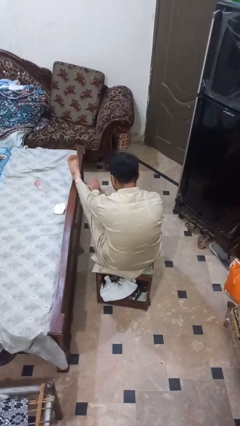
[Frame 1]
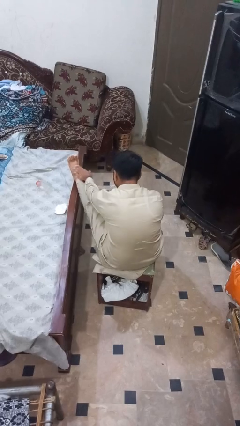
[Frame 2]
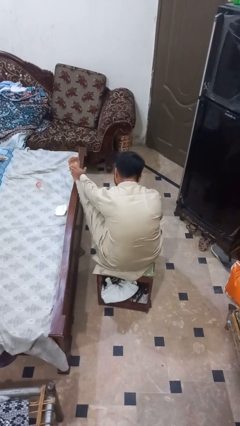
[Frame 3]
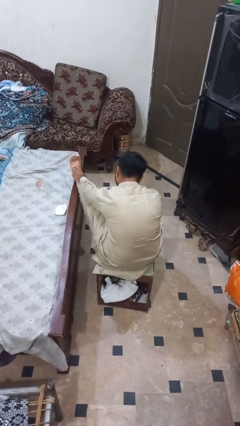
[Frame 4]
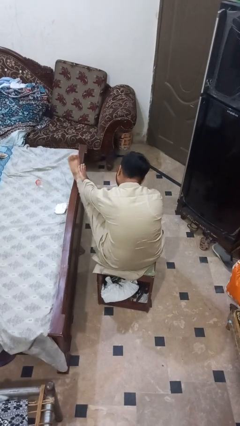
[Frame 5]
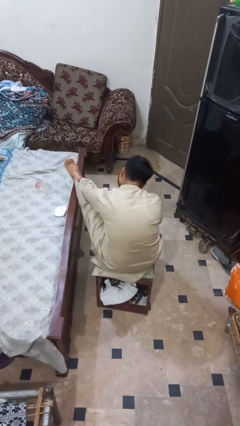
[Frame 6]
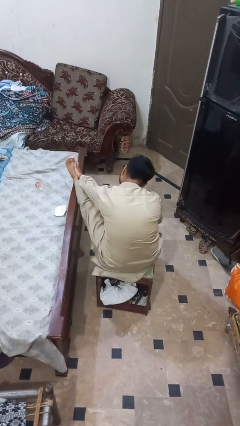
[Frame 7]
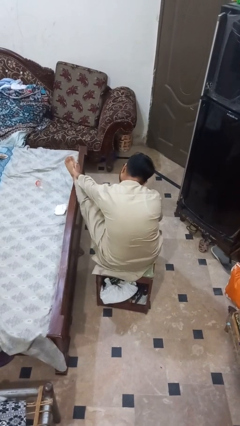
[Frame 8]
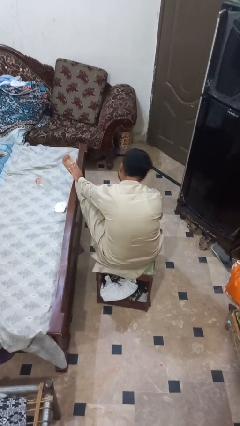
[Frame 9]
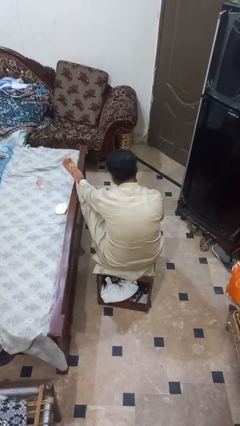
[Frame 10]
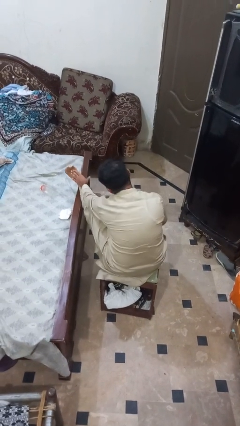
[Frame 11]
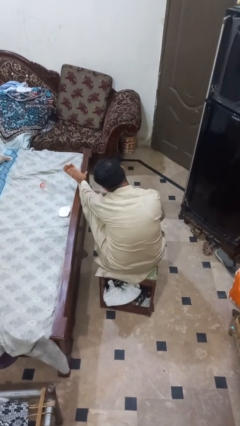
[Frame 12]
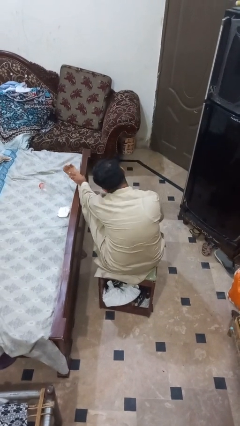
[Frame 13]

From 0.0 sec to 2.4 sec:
person rubs foot

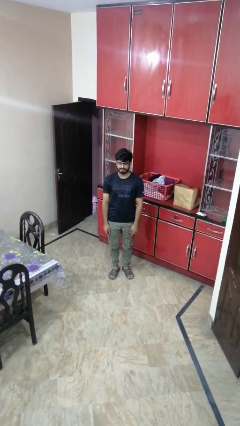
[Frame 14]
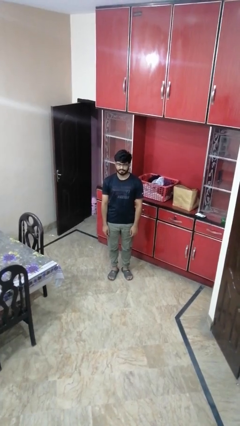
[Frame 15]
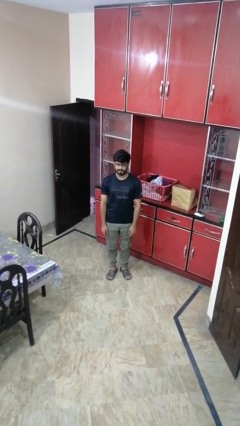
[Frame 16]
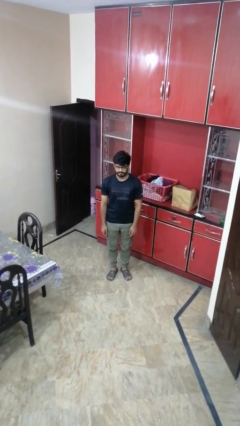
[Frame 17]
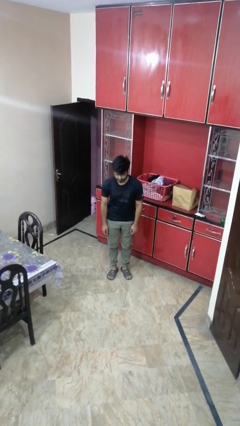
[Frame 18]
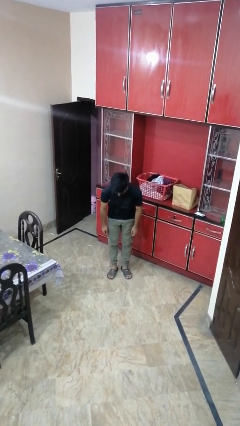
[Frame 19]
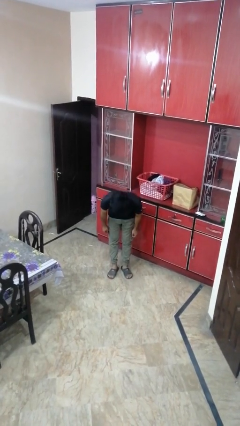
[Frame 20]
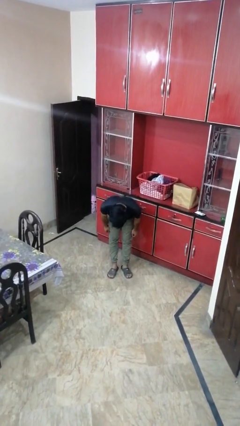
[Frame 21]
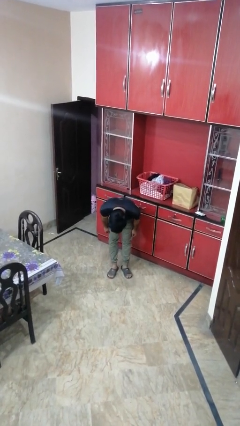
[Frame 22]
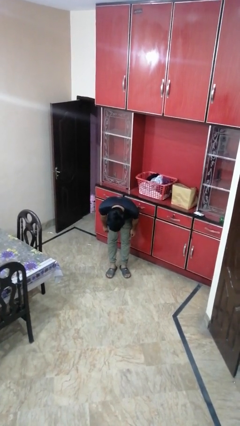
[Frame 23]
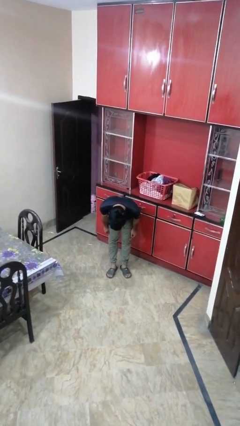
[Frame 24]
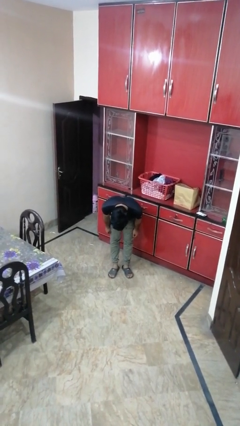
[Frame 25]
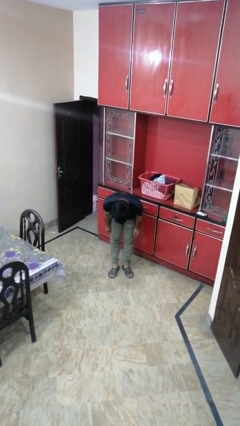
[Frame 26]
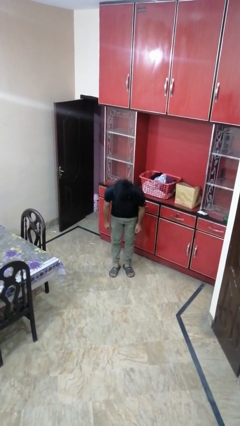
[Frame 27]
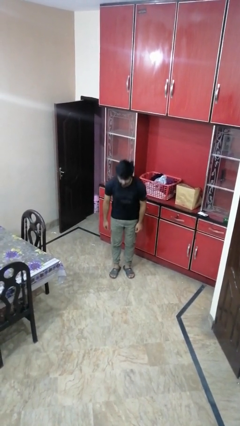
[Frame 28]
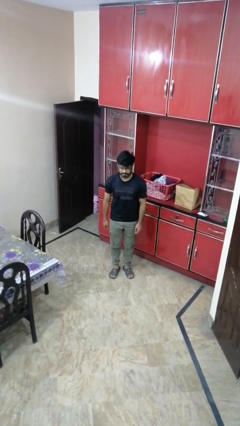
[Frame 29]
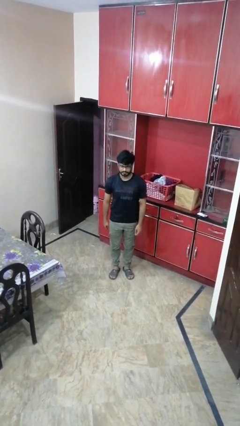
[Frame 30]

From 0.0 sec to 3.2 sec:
person bows

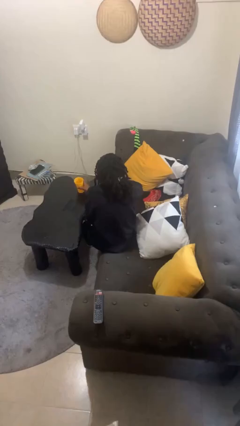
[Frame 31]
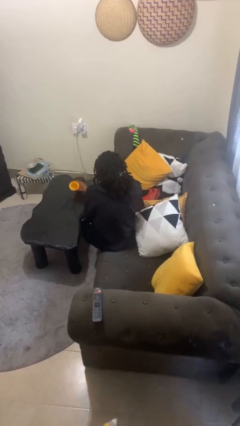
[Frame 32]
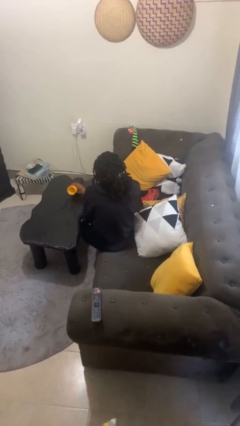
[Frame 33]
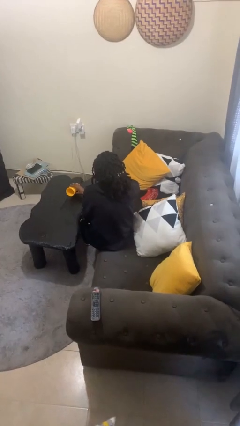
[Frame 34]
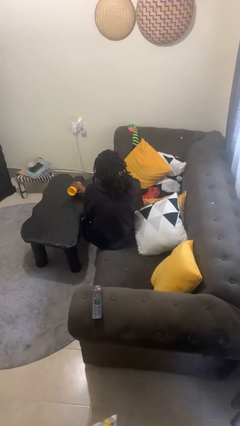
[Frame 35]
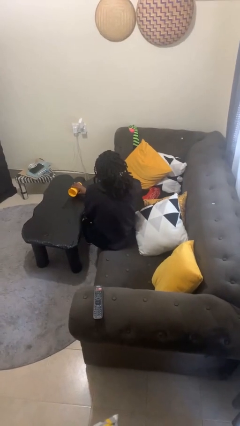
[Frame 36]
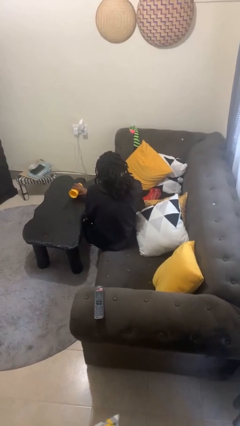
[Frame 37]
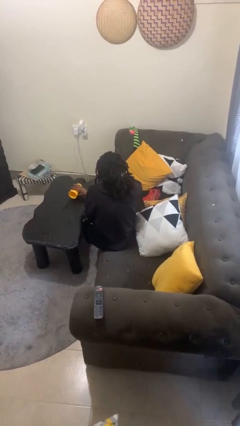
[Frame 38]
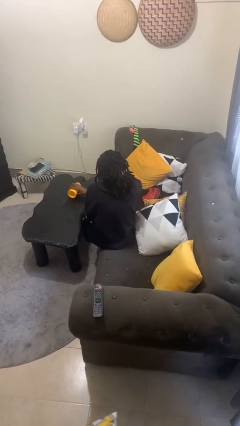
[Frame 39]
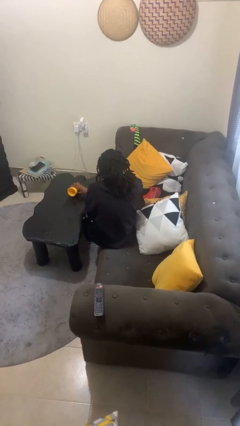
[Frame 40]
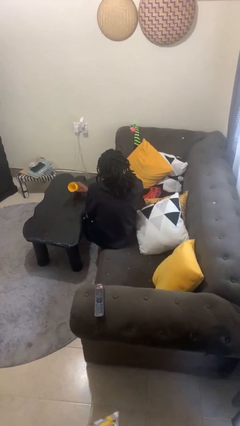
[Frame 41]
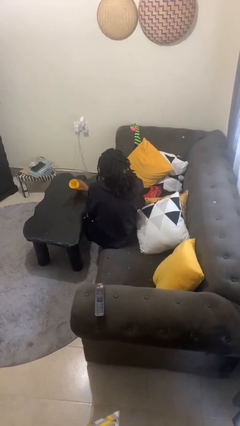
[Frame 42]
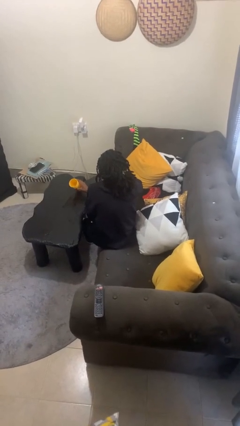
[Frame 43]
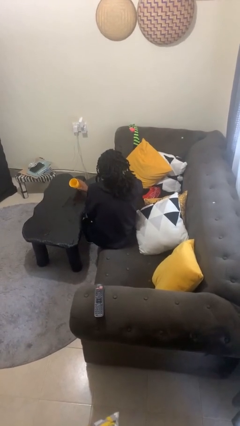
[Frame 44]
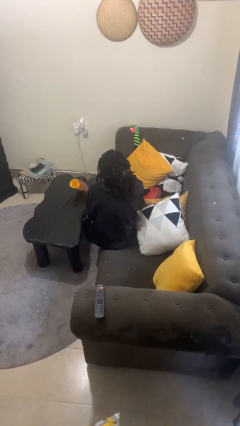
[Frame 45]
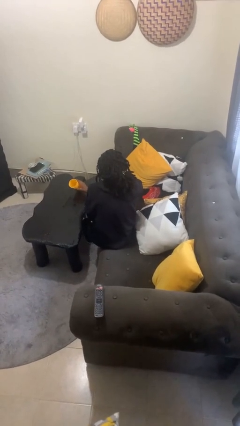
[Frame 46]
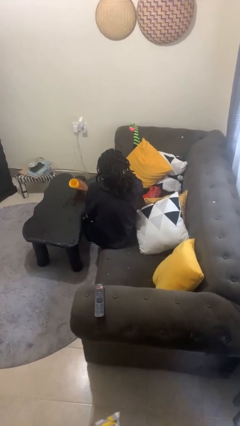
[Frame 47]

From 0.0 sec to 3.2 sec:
person spills on table

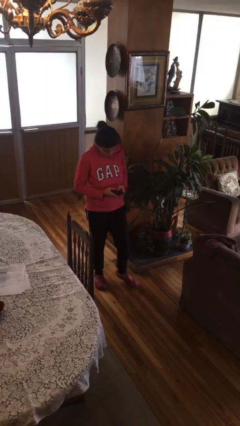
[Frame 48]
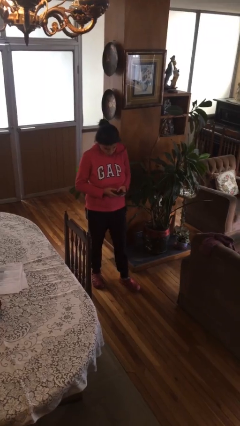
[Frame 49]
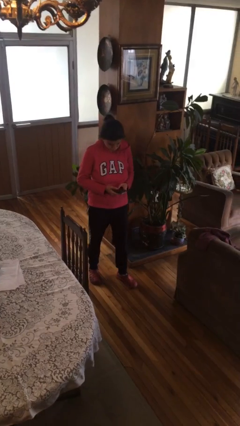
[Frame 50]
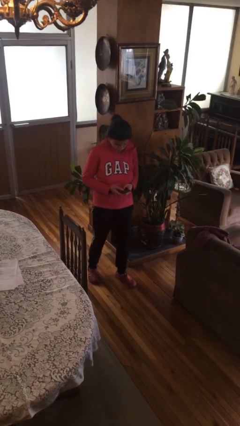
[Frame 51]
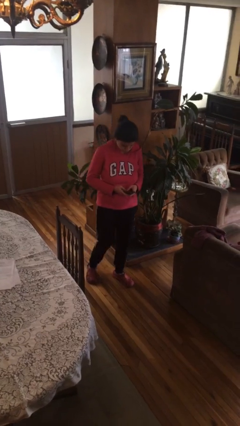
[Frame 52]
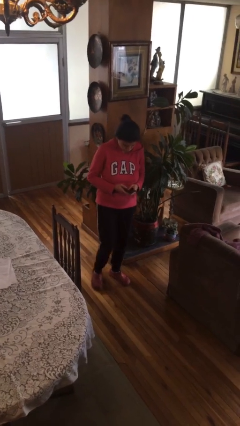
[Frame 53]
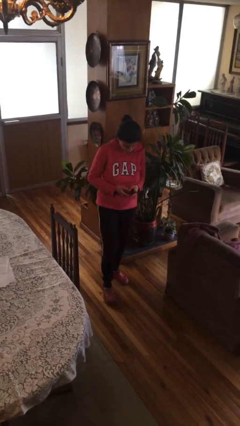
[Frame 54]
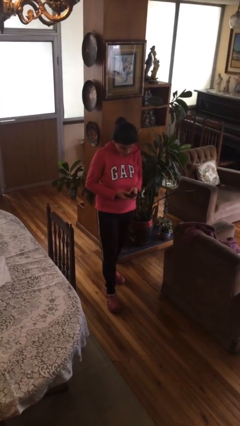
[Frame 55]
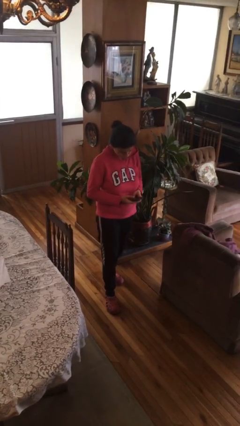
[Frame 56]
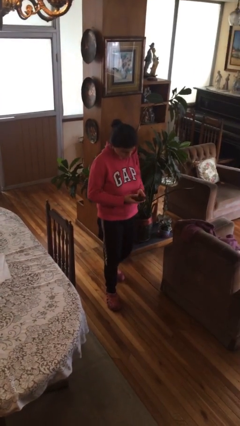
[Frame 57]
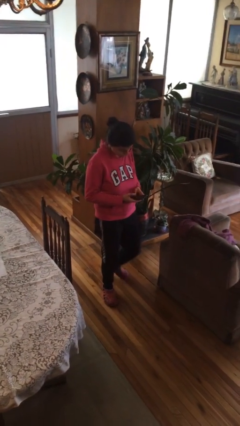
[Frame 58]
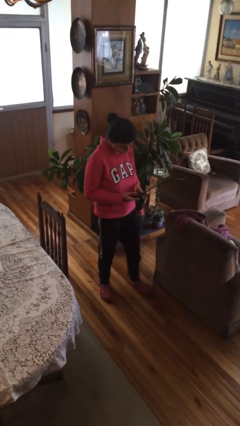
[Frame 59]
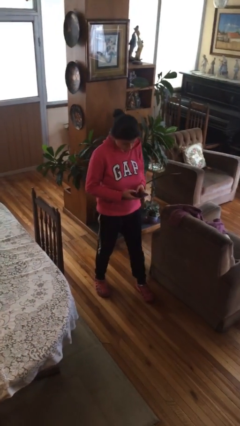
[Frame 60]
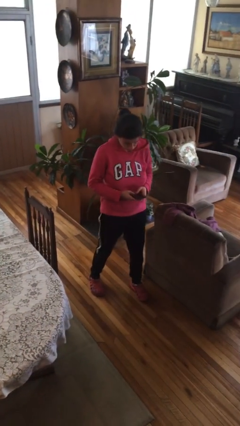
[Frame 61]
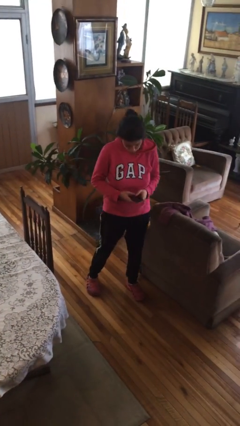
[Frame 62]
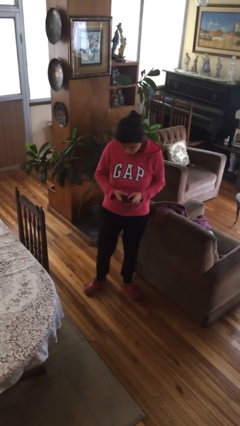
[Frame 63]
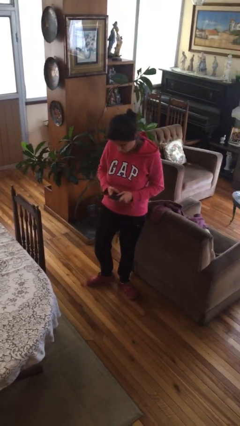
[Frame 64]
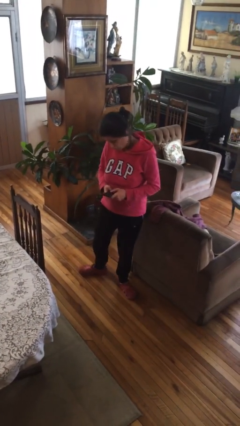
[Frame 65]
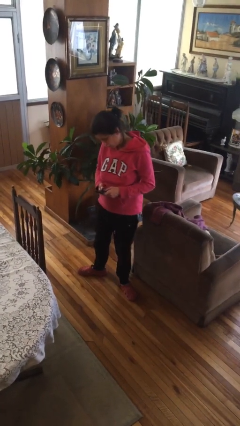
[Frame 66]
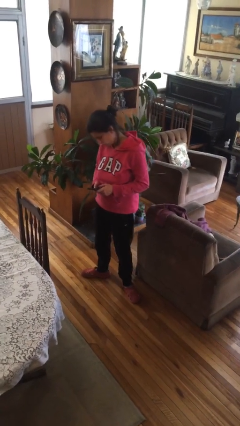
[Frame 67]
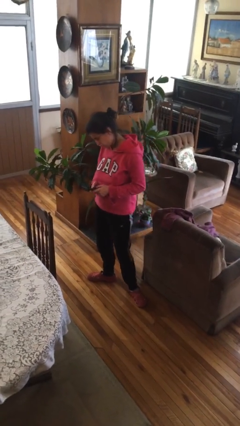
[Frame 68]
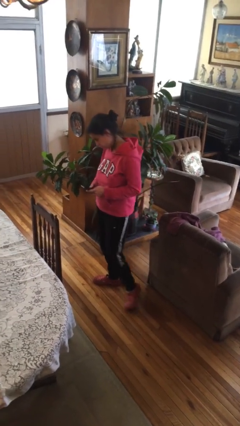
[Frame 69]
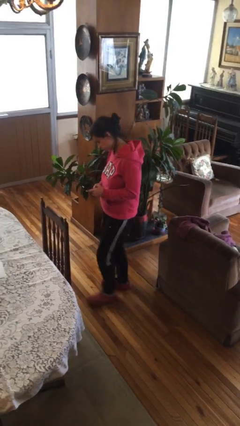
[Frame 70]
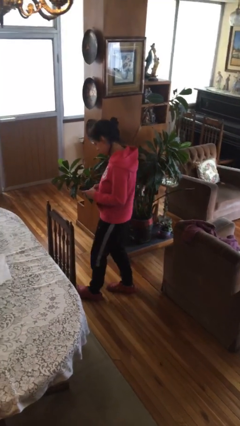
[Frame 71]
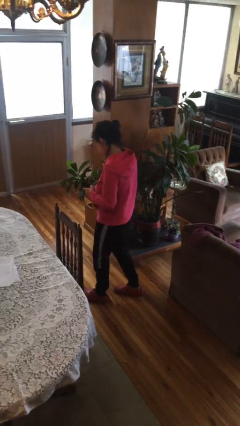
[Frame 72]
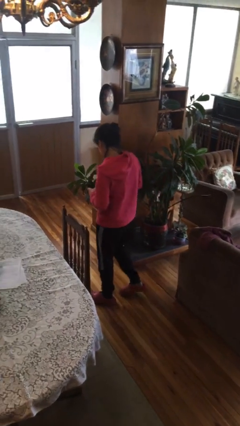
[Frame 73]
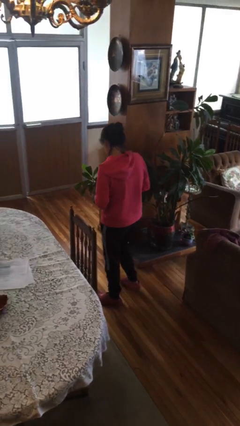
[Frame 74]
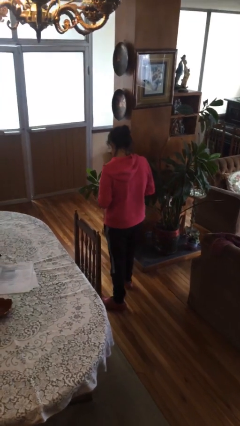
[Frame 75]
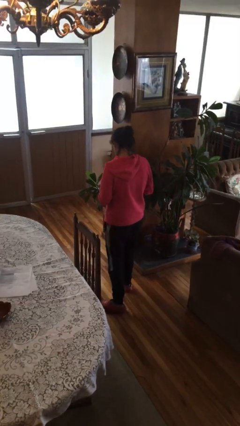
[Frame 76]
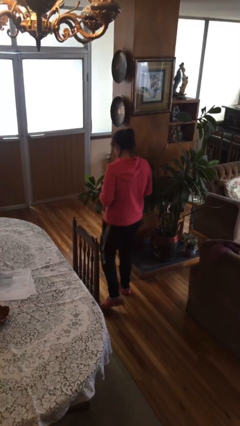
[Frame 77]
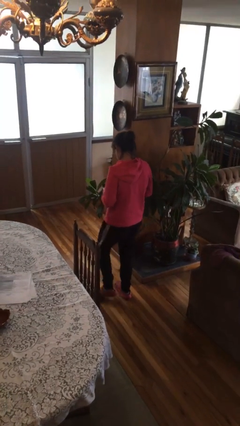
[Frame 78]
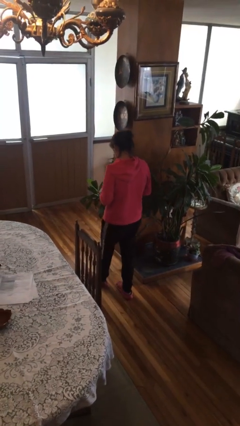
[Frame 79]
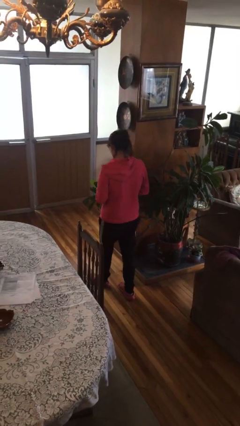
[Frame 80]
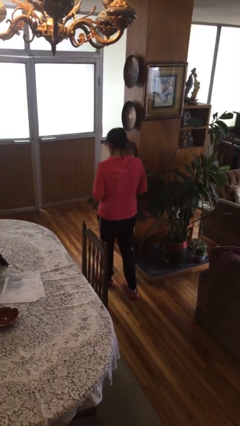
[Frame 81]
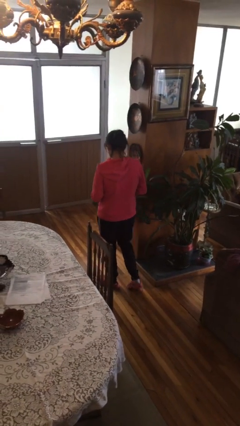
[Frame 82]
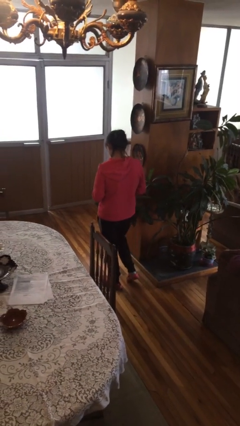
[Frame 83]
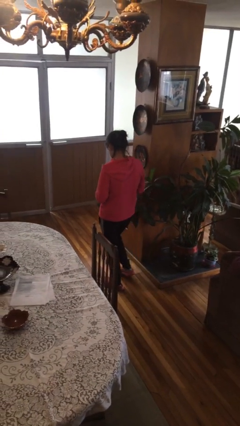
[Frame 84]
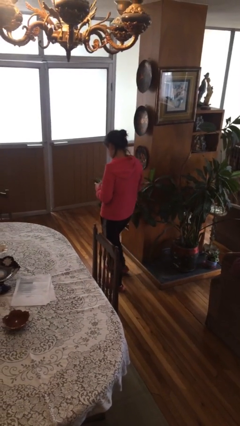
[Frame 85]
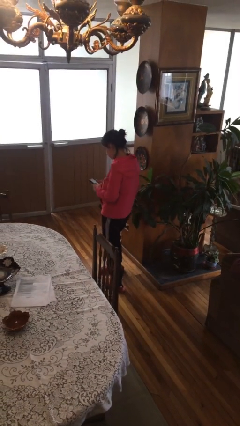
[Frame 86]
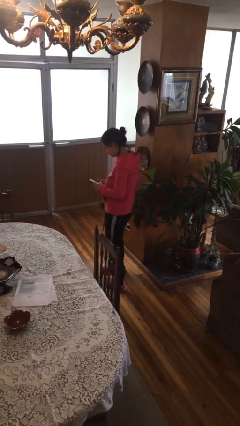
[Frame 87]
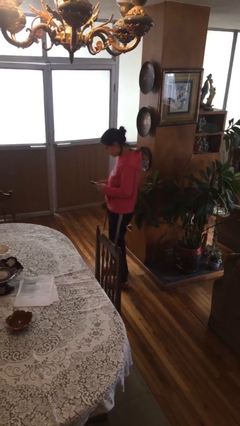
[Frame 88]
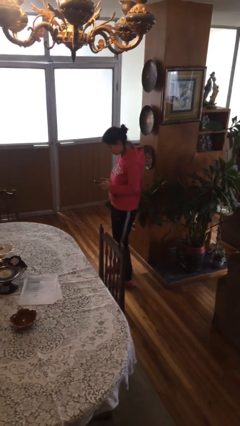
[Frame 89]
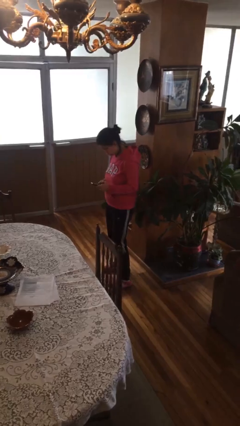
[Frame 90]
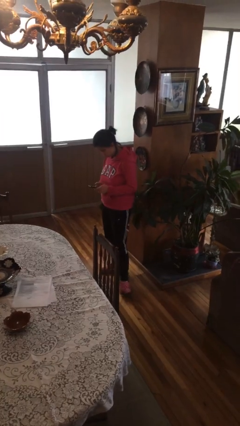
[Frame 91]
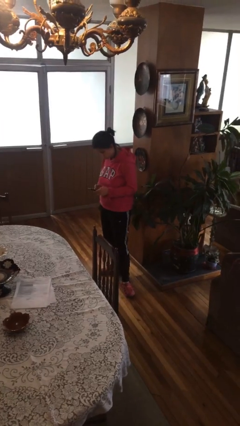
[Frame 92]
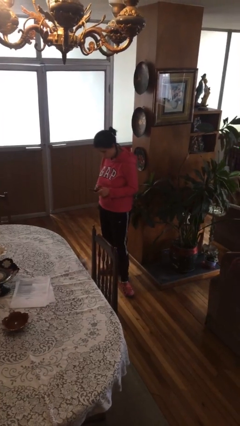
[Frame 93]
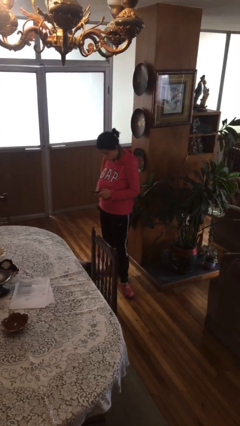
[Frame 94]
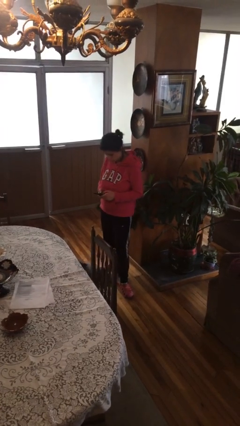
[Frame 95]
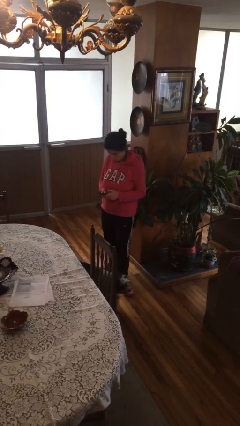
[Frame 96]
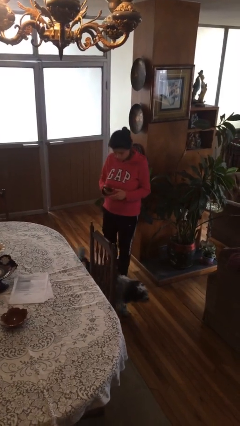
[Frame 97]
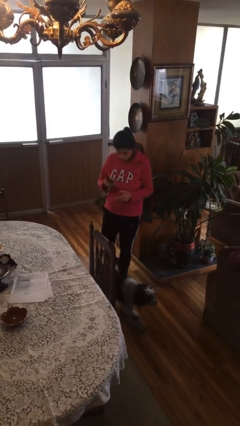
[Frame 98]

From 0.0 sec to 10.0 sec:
person texts on phone
